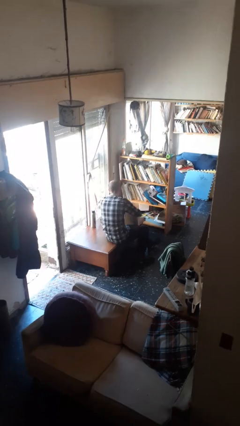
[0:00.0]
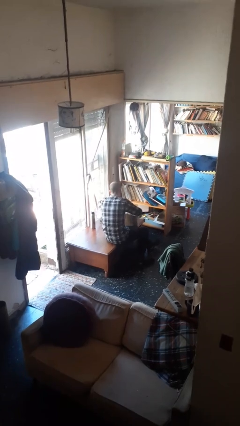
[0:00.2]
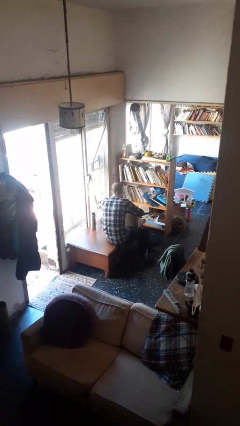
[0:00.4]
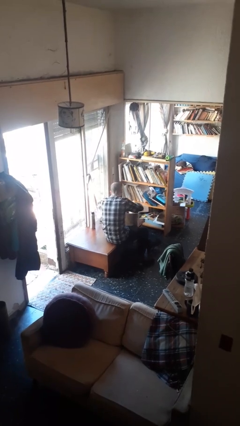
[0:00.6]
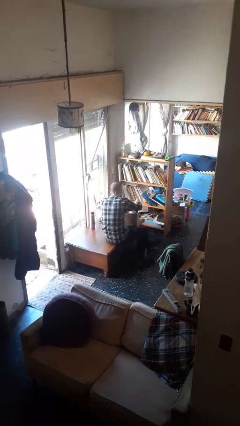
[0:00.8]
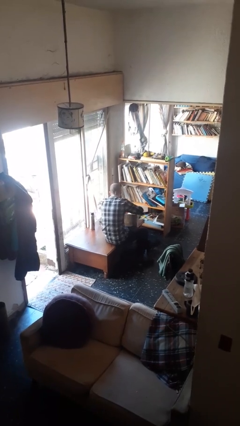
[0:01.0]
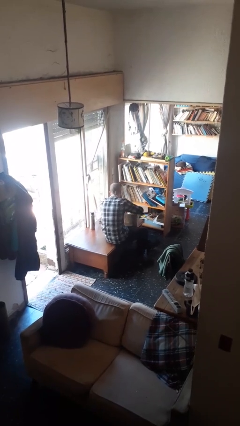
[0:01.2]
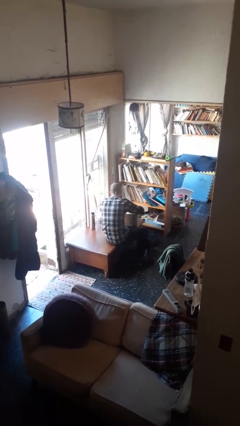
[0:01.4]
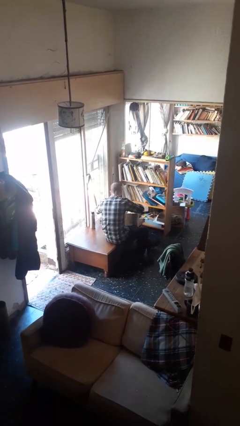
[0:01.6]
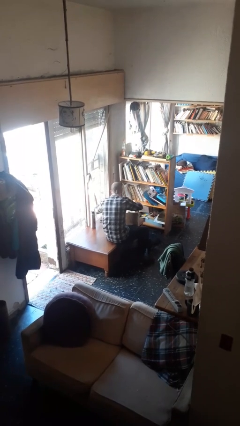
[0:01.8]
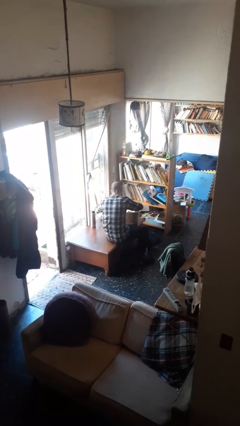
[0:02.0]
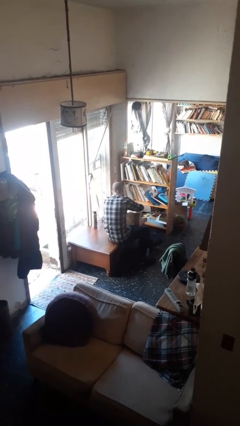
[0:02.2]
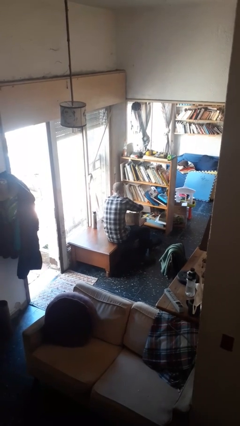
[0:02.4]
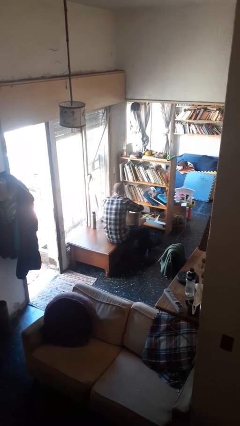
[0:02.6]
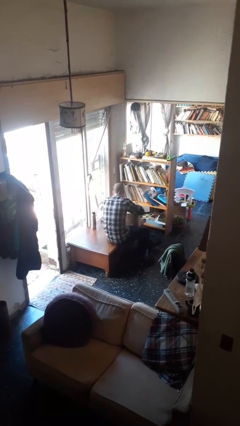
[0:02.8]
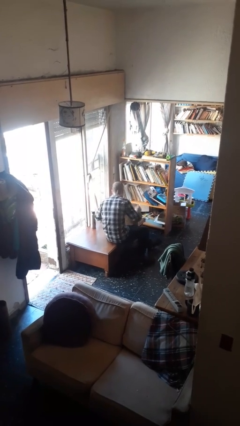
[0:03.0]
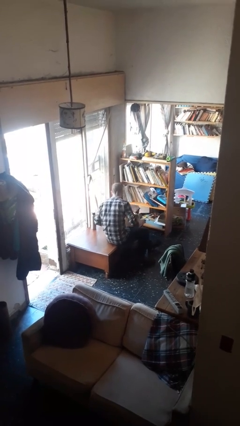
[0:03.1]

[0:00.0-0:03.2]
person searches in box

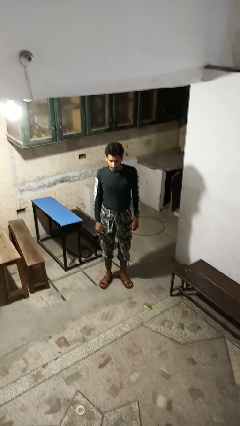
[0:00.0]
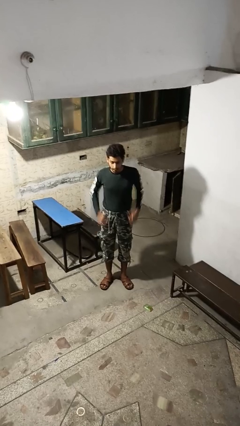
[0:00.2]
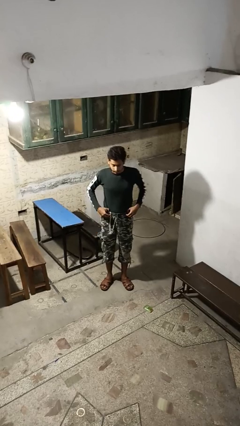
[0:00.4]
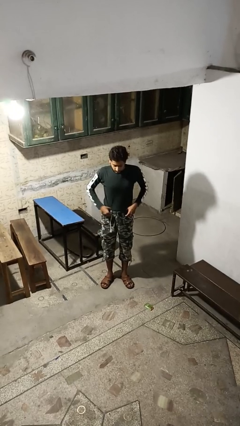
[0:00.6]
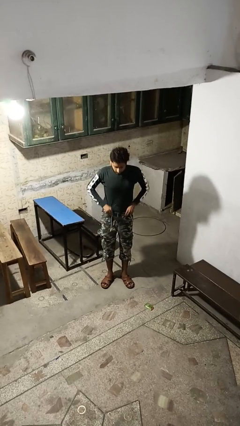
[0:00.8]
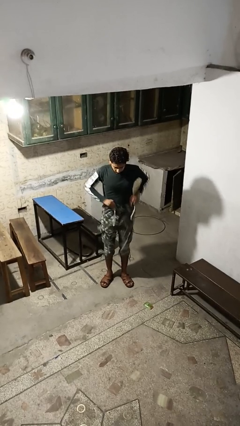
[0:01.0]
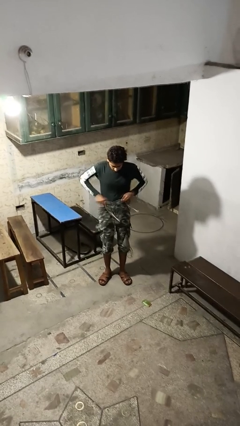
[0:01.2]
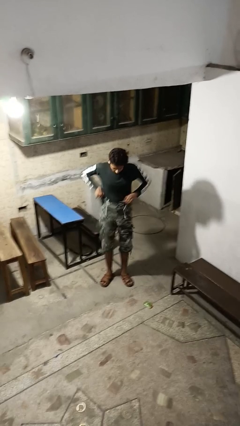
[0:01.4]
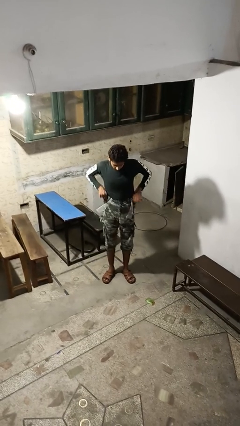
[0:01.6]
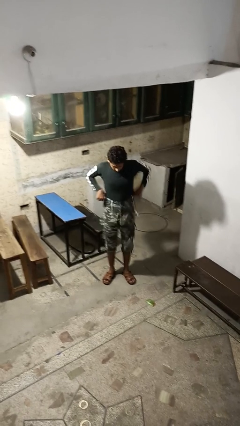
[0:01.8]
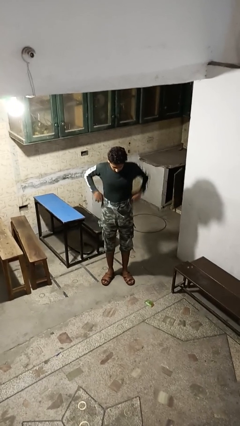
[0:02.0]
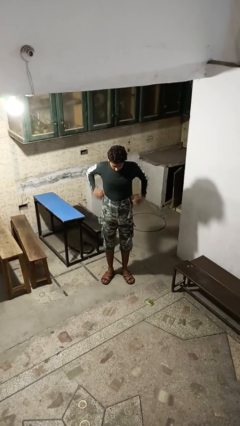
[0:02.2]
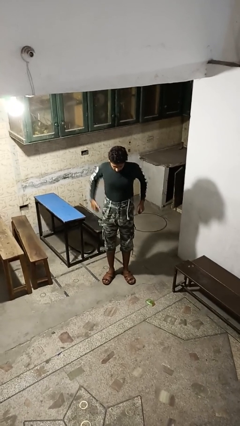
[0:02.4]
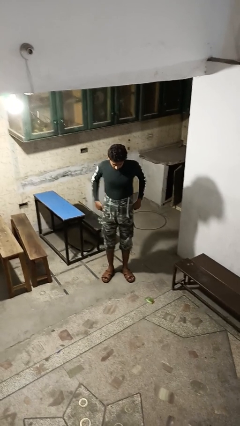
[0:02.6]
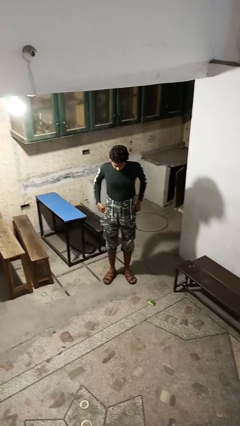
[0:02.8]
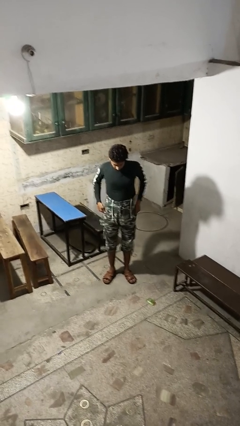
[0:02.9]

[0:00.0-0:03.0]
person hikes up pants

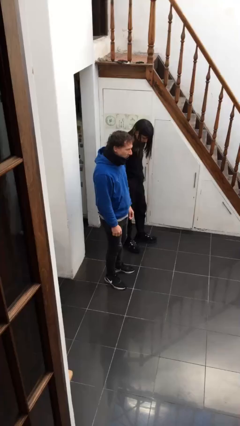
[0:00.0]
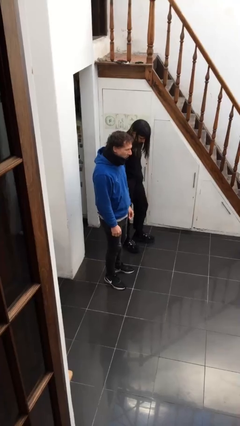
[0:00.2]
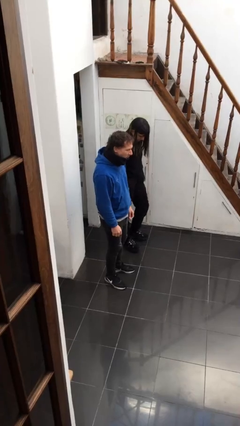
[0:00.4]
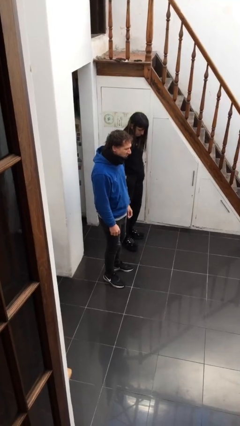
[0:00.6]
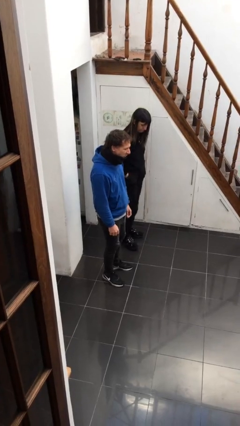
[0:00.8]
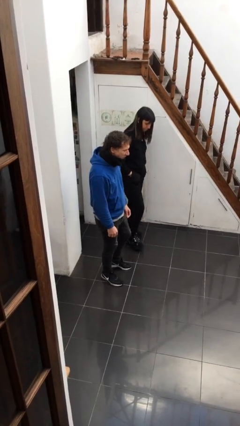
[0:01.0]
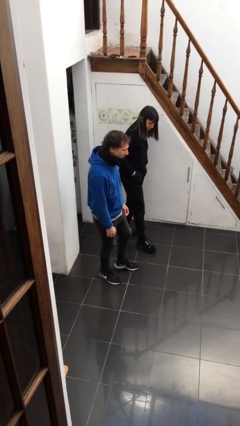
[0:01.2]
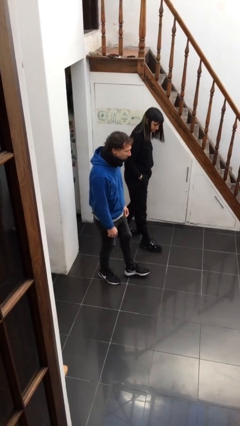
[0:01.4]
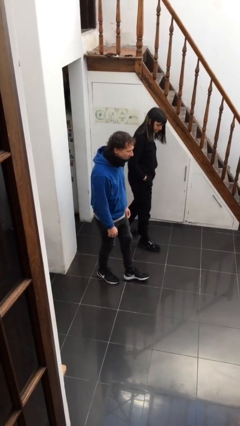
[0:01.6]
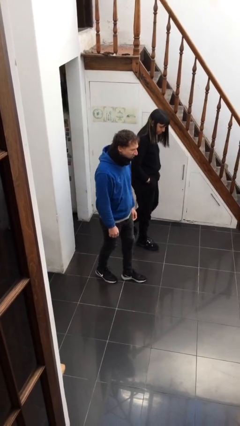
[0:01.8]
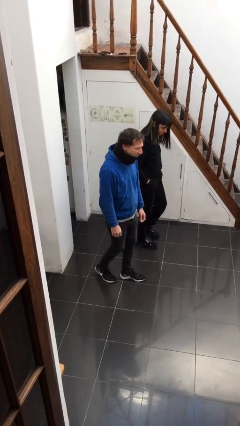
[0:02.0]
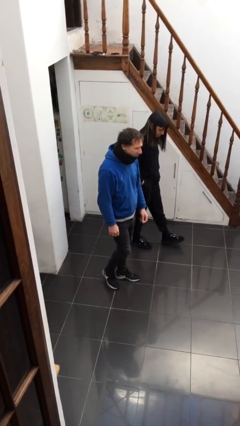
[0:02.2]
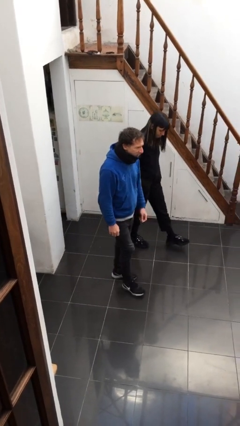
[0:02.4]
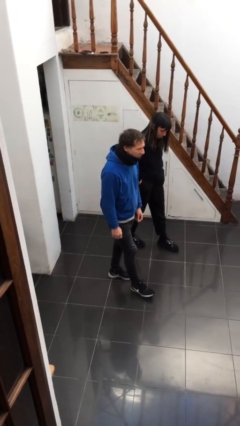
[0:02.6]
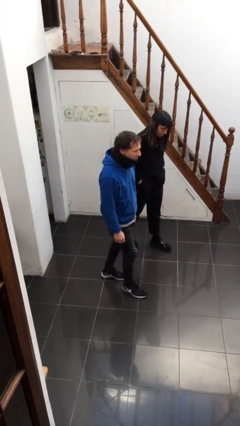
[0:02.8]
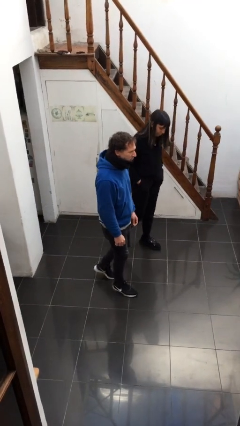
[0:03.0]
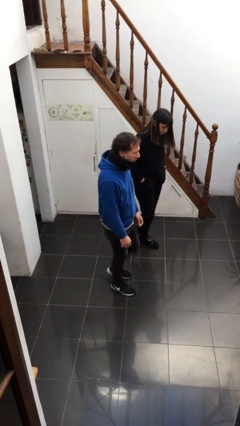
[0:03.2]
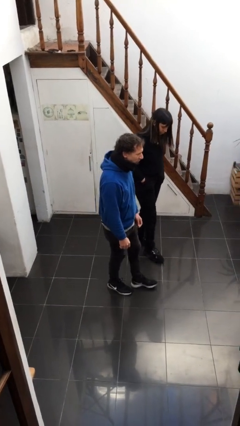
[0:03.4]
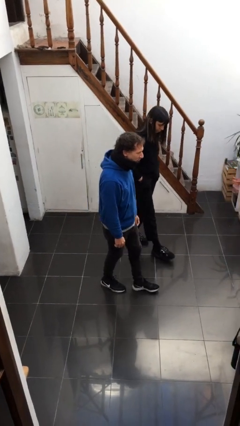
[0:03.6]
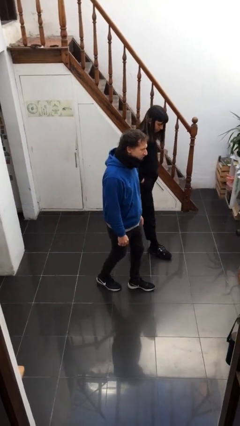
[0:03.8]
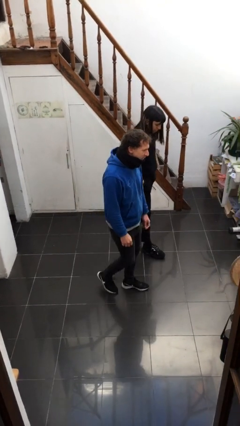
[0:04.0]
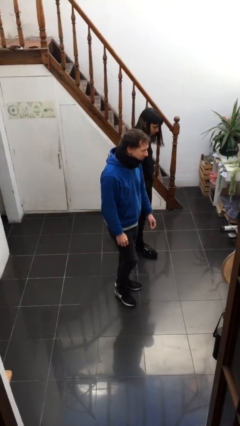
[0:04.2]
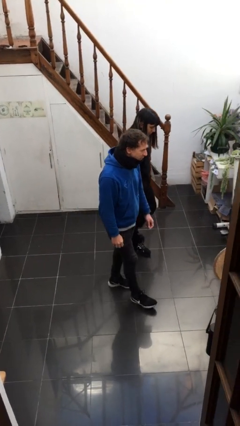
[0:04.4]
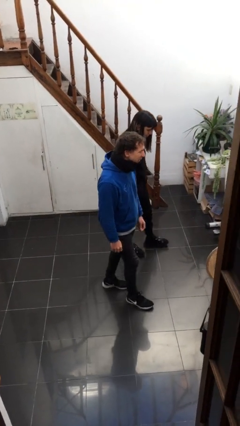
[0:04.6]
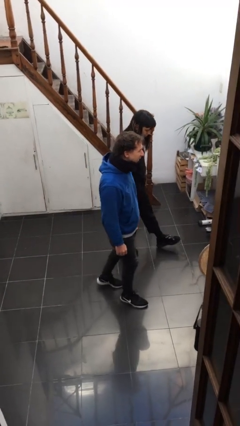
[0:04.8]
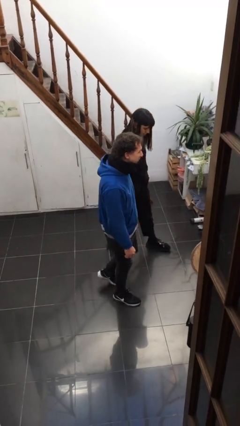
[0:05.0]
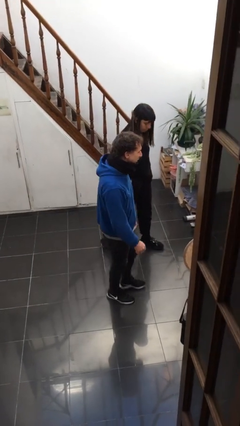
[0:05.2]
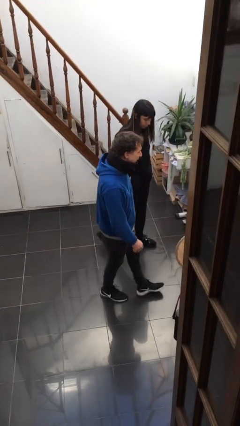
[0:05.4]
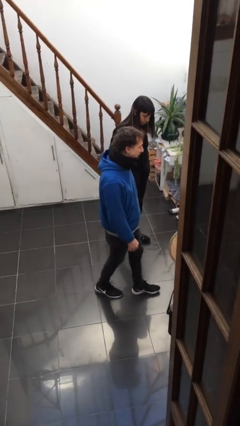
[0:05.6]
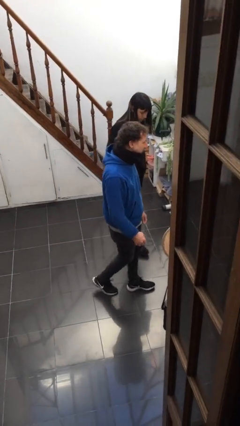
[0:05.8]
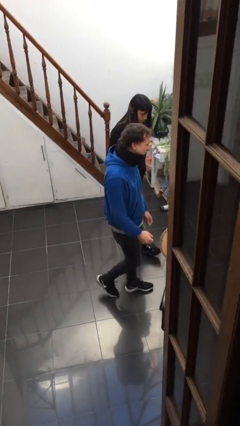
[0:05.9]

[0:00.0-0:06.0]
person talks to person

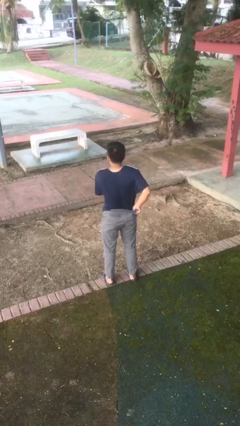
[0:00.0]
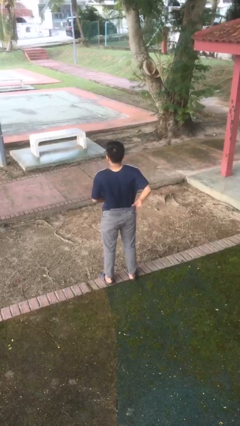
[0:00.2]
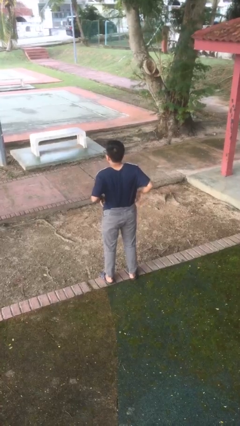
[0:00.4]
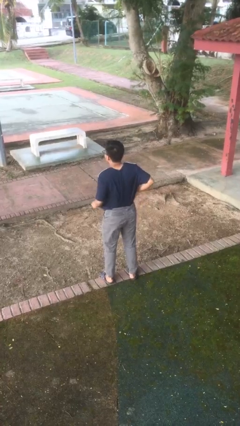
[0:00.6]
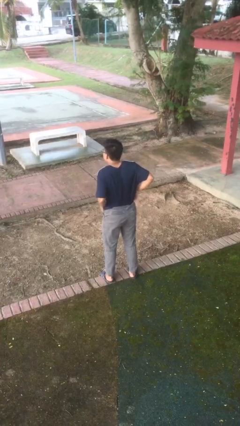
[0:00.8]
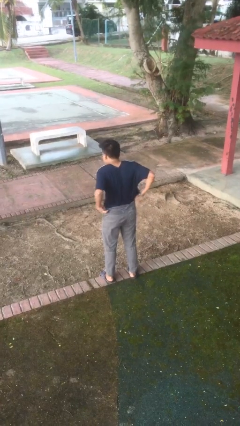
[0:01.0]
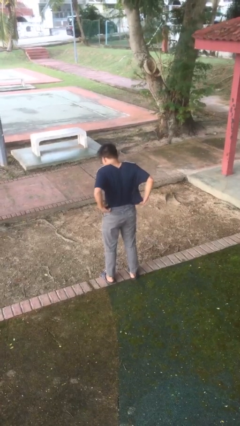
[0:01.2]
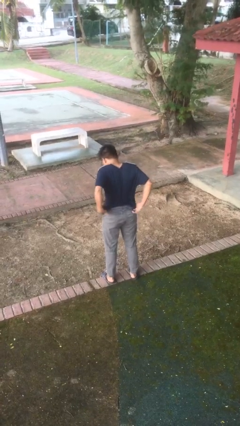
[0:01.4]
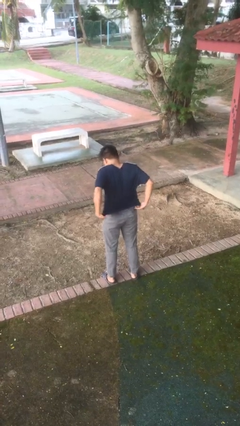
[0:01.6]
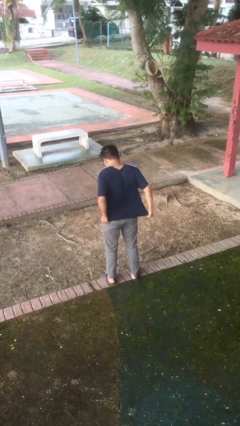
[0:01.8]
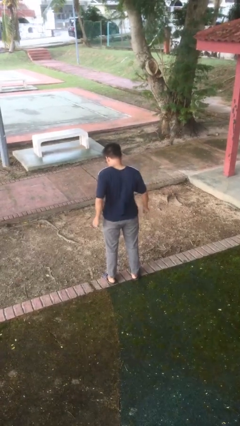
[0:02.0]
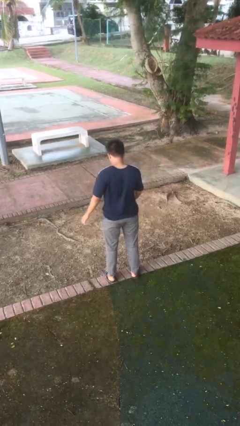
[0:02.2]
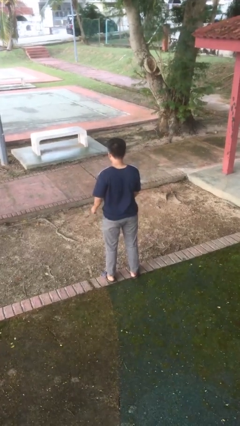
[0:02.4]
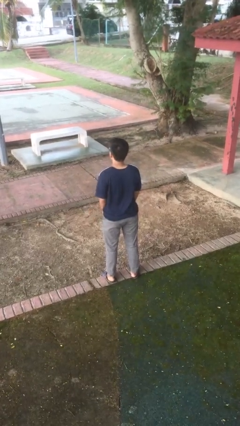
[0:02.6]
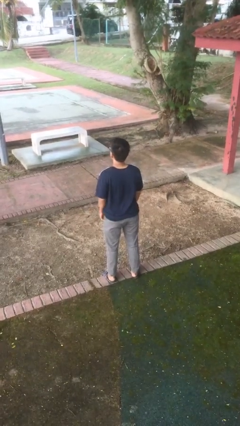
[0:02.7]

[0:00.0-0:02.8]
person untucks shirt

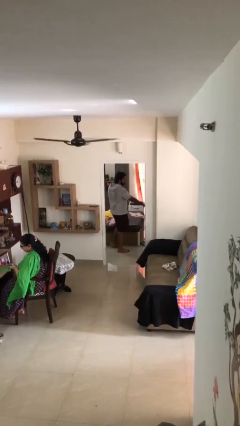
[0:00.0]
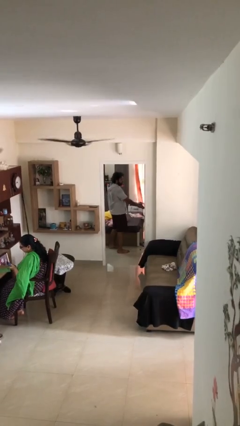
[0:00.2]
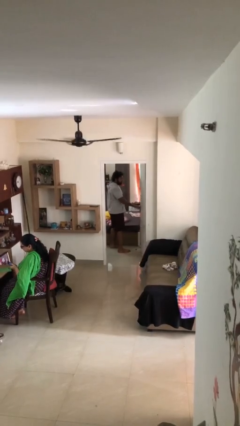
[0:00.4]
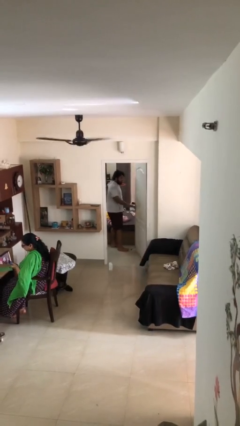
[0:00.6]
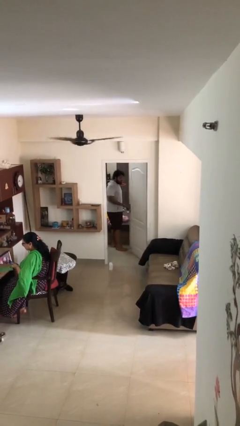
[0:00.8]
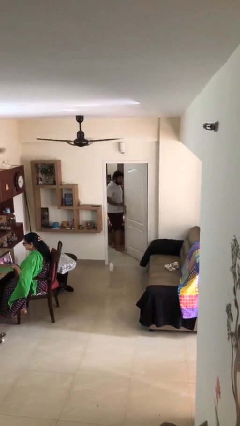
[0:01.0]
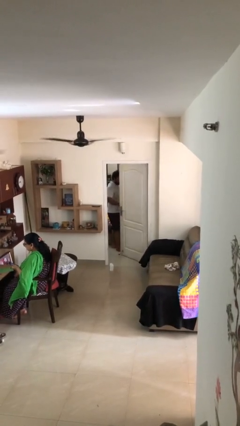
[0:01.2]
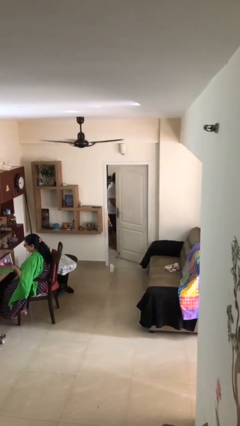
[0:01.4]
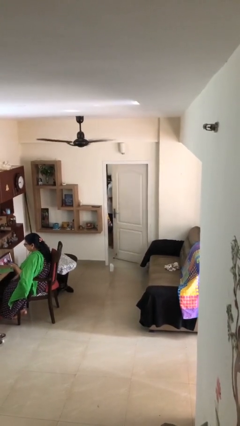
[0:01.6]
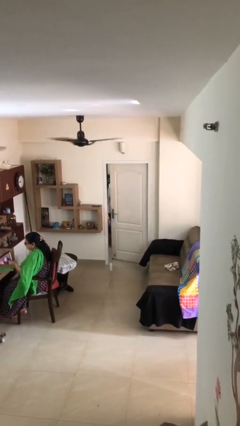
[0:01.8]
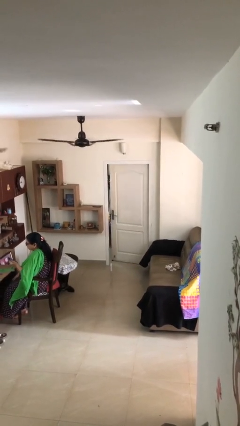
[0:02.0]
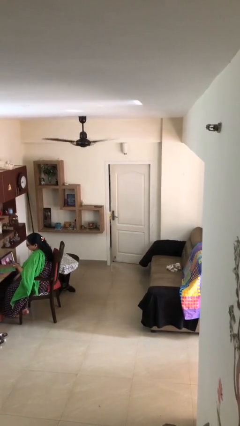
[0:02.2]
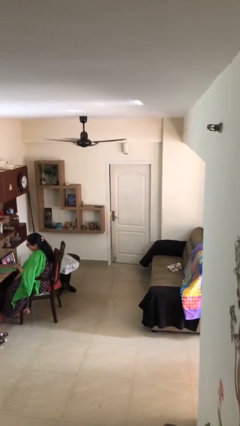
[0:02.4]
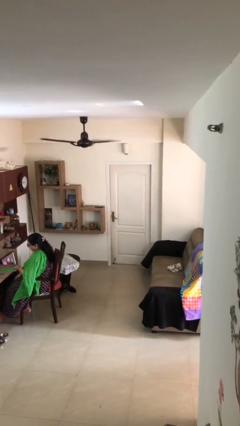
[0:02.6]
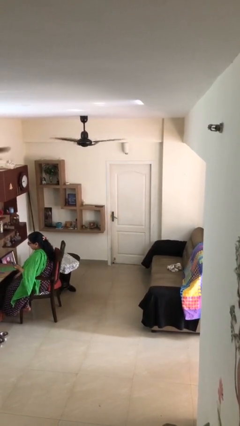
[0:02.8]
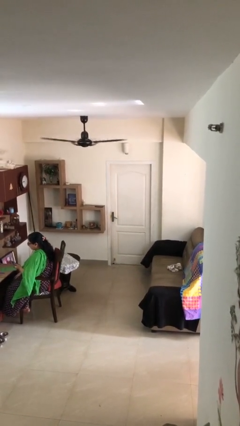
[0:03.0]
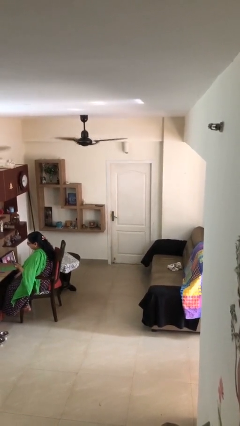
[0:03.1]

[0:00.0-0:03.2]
person closes facility door
